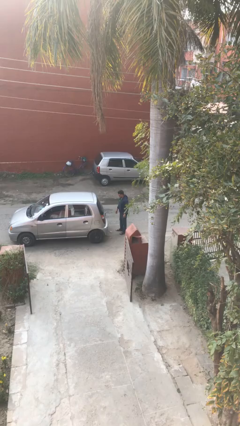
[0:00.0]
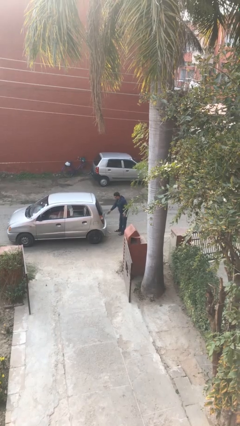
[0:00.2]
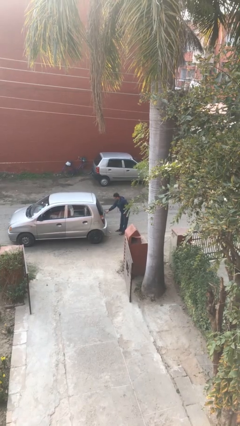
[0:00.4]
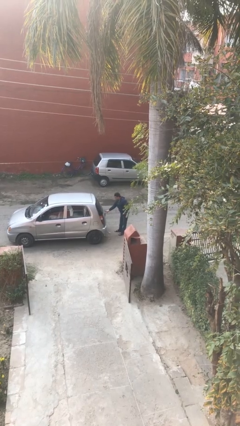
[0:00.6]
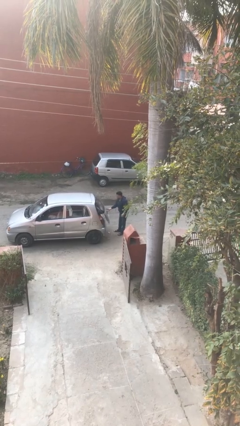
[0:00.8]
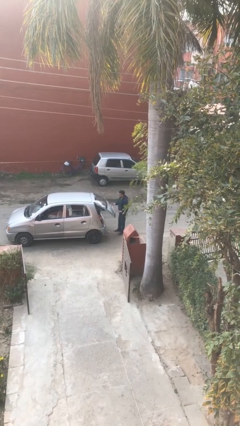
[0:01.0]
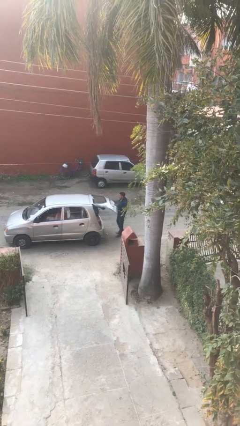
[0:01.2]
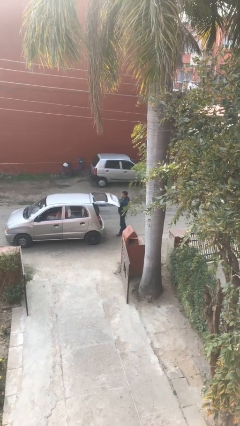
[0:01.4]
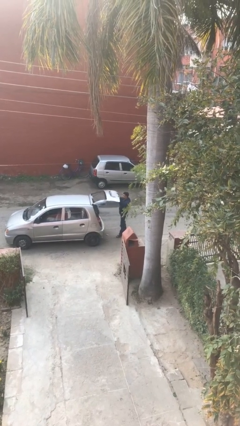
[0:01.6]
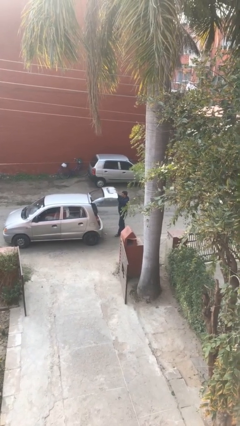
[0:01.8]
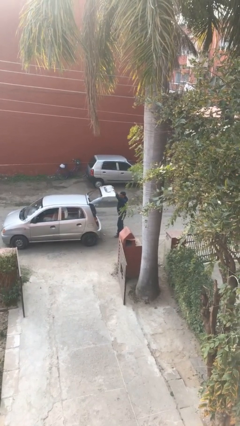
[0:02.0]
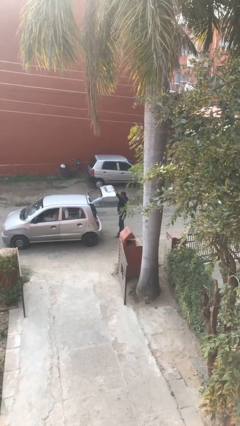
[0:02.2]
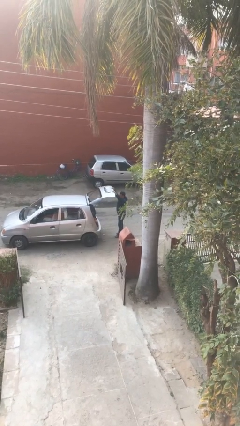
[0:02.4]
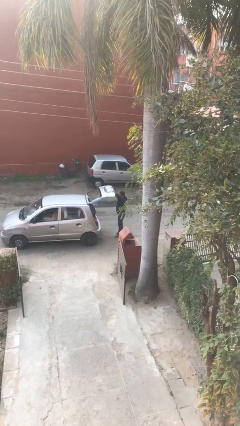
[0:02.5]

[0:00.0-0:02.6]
person opens car trunk

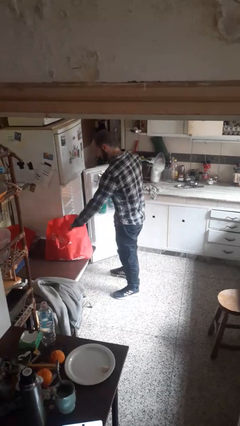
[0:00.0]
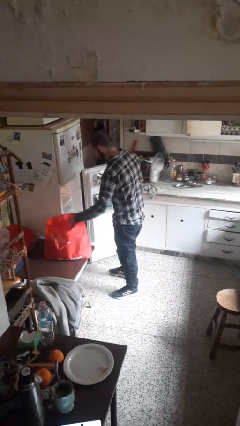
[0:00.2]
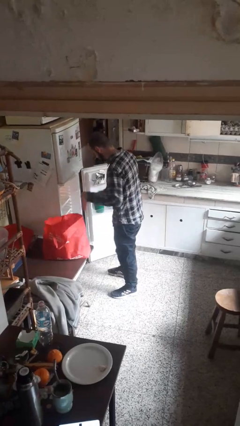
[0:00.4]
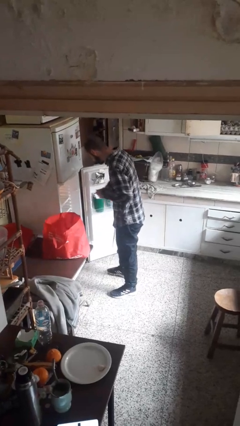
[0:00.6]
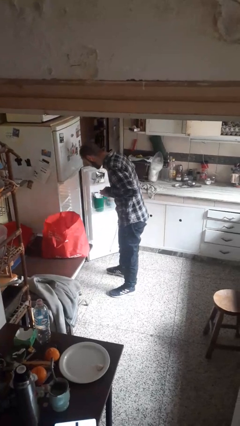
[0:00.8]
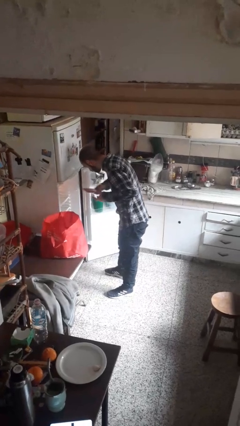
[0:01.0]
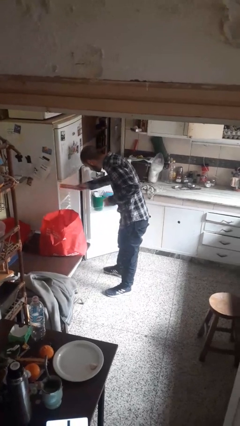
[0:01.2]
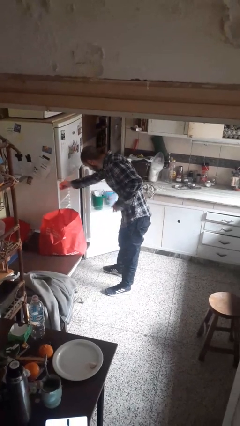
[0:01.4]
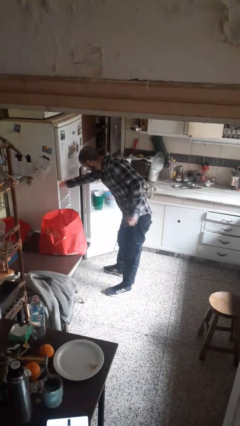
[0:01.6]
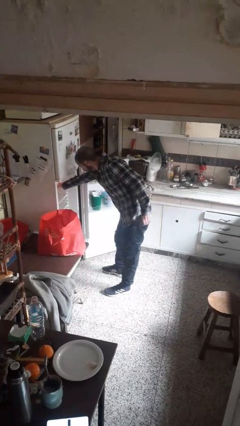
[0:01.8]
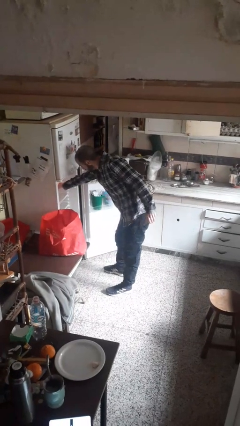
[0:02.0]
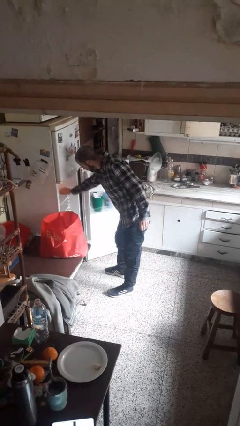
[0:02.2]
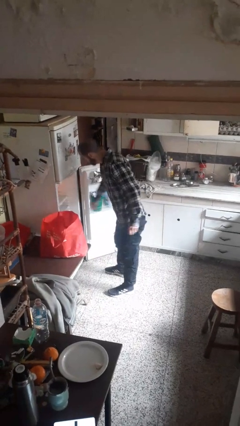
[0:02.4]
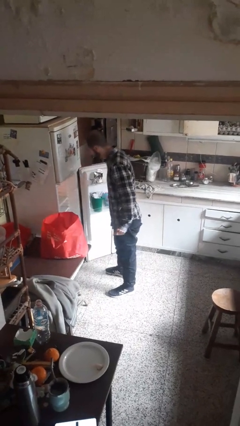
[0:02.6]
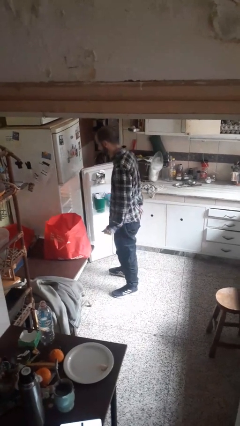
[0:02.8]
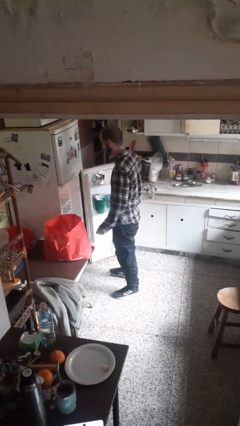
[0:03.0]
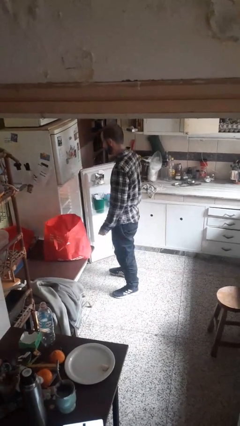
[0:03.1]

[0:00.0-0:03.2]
person loads groceries into refrigerator

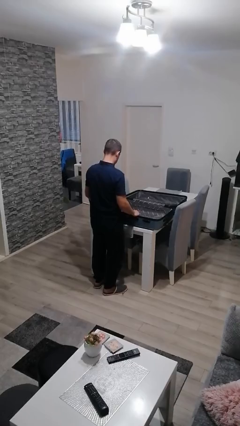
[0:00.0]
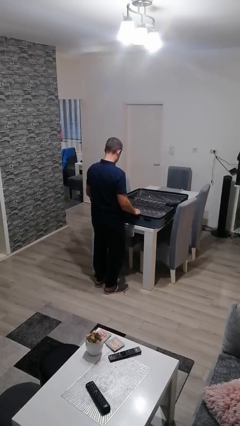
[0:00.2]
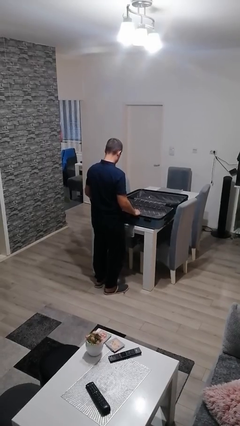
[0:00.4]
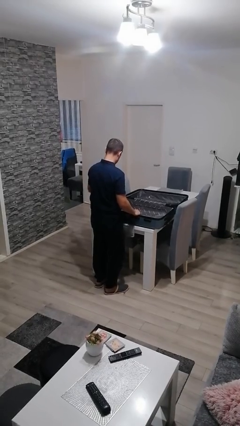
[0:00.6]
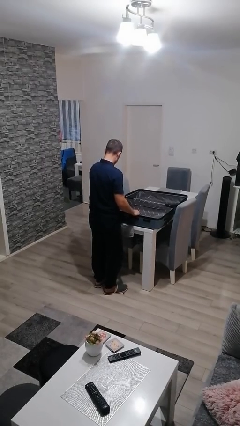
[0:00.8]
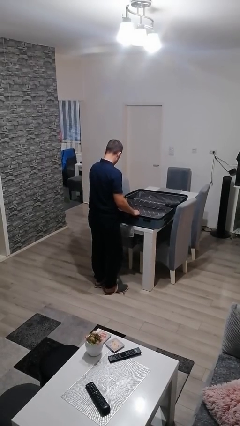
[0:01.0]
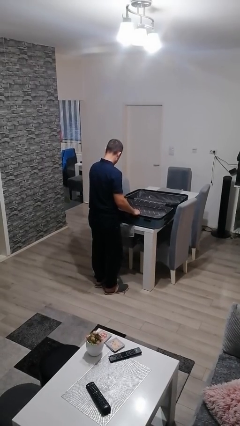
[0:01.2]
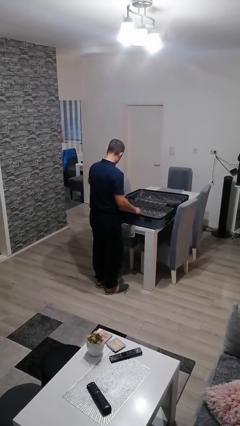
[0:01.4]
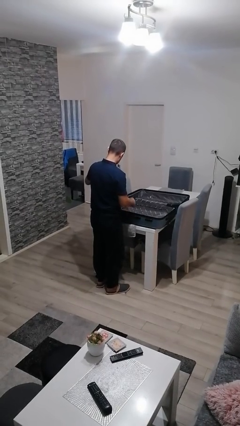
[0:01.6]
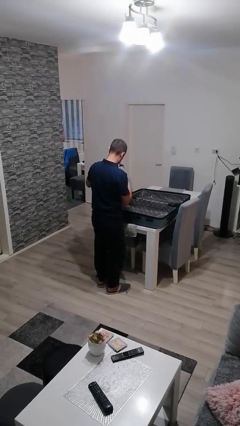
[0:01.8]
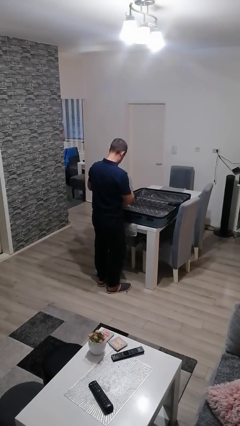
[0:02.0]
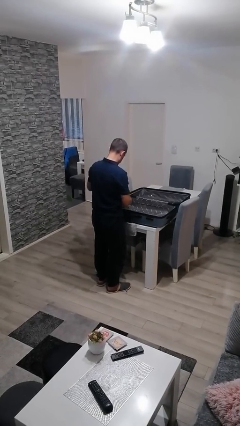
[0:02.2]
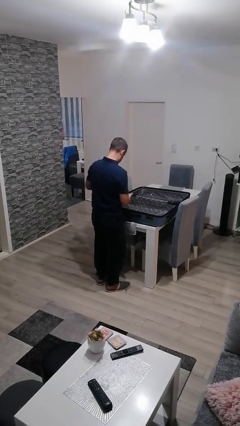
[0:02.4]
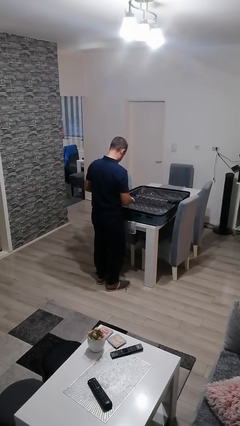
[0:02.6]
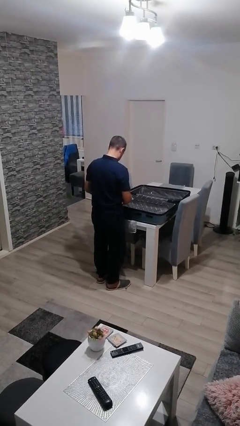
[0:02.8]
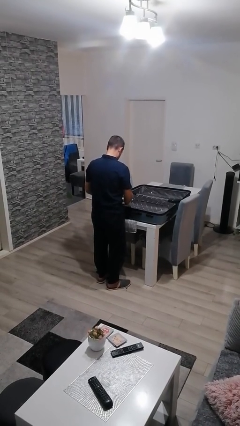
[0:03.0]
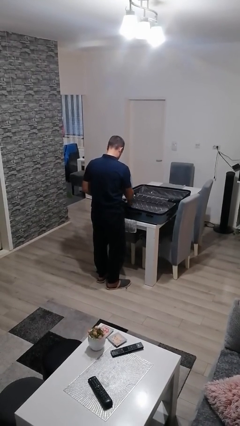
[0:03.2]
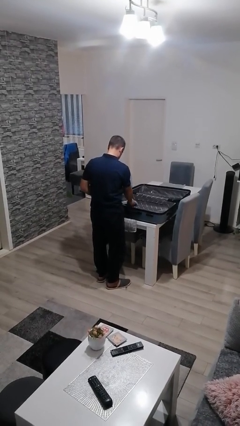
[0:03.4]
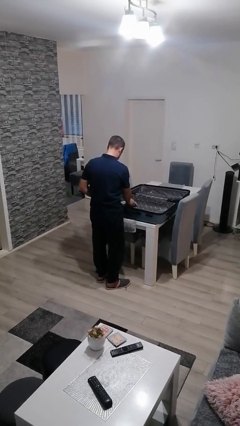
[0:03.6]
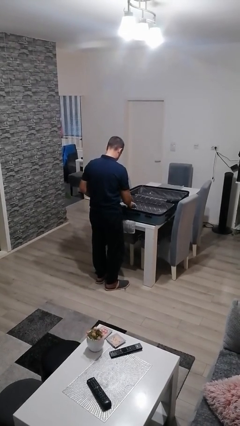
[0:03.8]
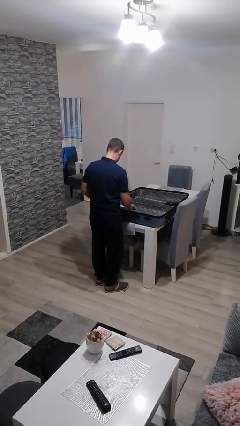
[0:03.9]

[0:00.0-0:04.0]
person loads clothes into suitcase

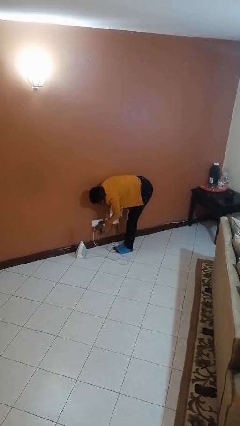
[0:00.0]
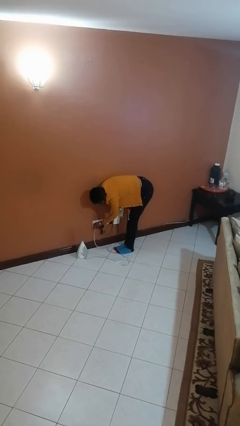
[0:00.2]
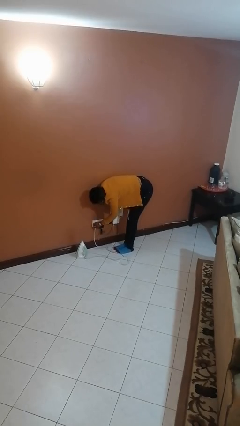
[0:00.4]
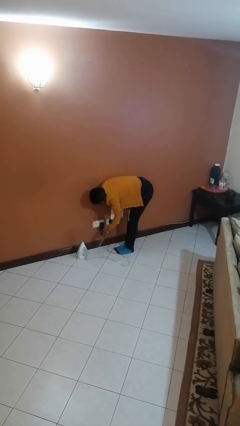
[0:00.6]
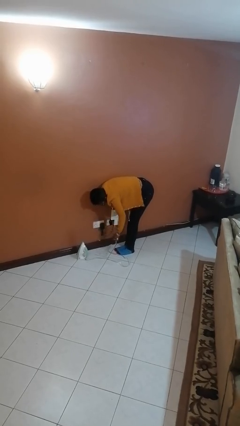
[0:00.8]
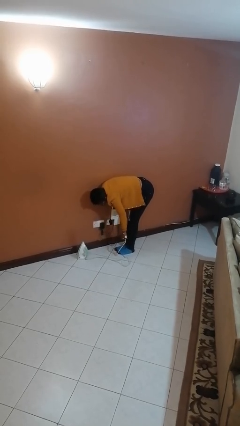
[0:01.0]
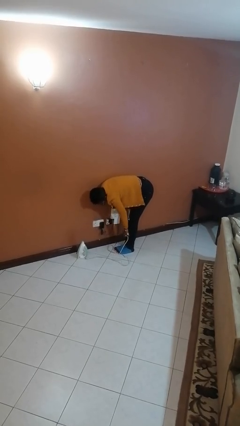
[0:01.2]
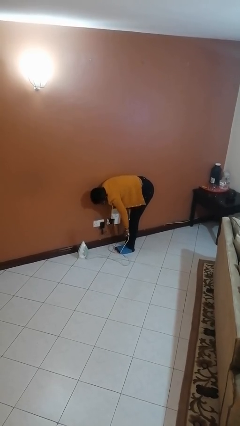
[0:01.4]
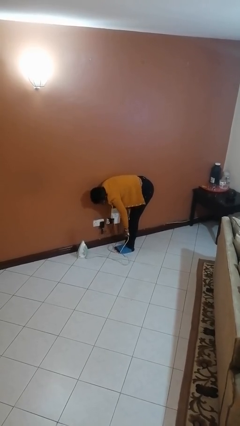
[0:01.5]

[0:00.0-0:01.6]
person unplugs from electrical socket

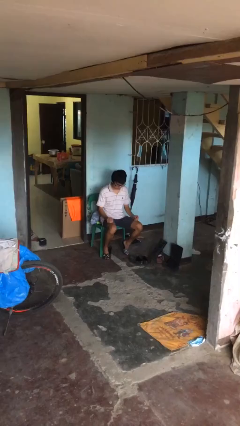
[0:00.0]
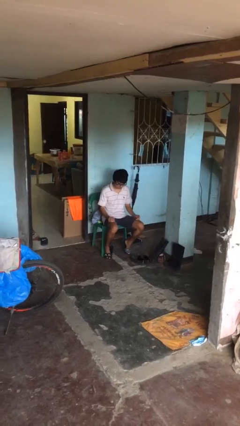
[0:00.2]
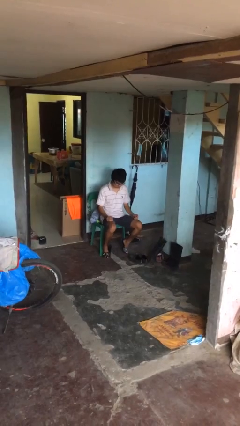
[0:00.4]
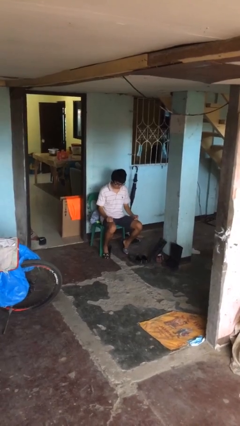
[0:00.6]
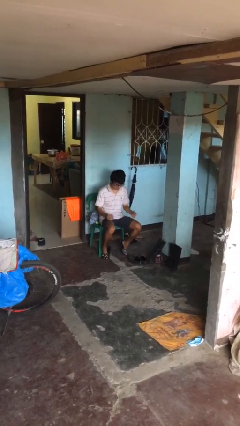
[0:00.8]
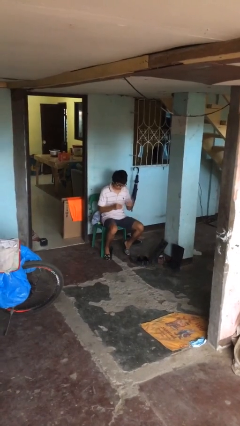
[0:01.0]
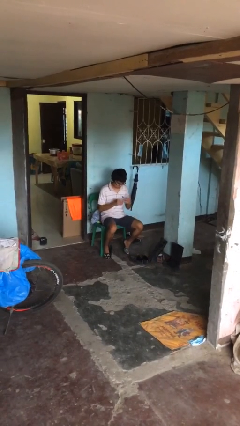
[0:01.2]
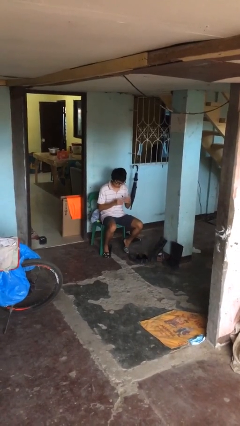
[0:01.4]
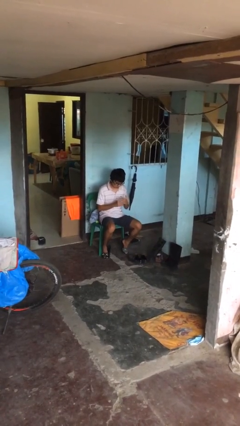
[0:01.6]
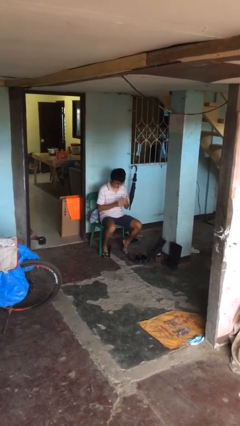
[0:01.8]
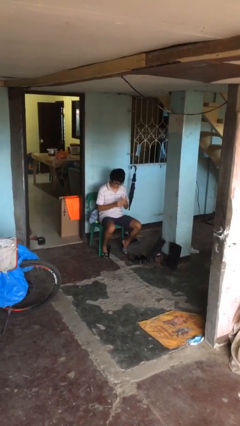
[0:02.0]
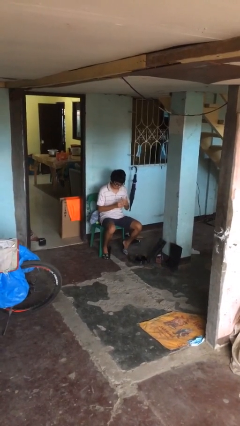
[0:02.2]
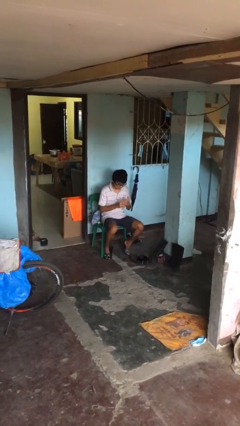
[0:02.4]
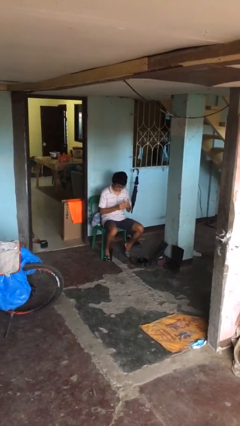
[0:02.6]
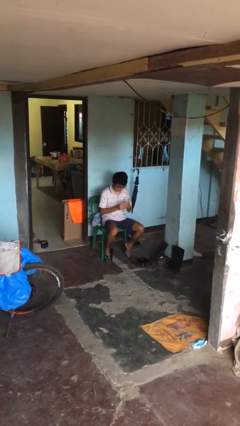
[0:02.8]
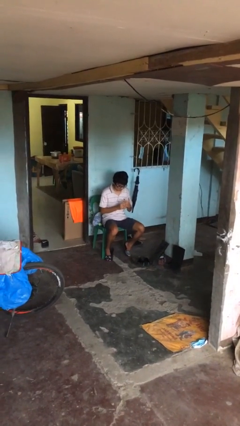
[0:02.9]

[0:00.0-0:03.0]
person puts on ring

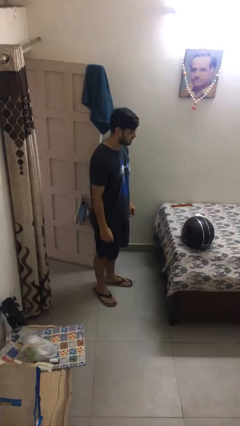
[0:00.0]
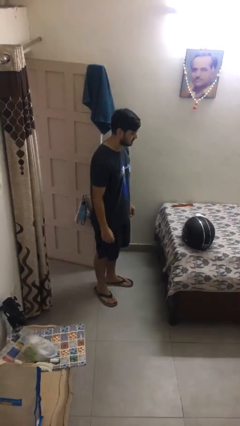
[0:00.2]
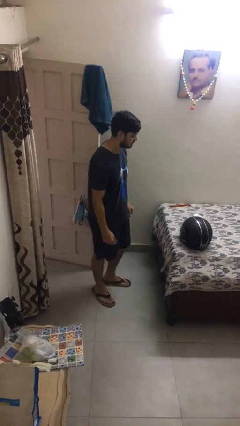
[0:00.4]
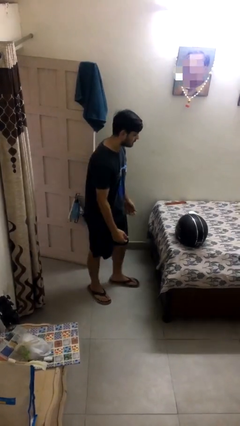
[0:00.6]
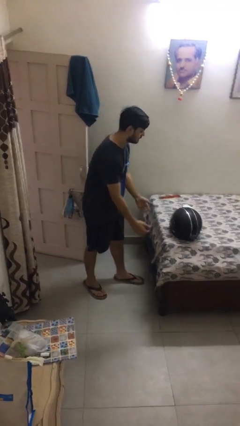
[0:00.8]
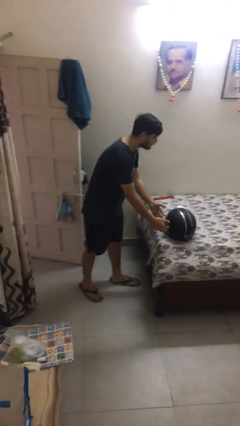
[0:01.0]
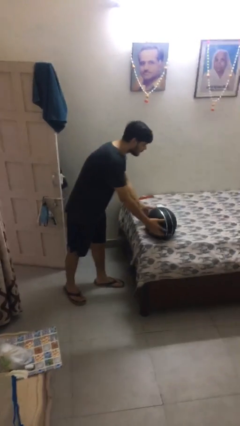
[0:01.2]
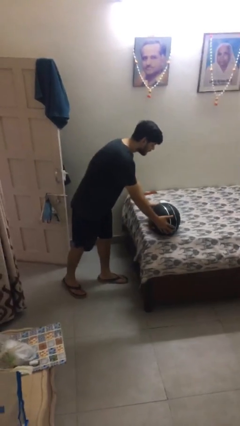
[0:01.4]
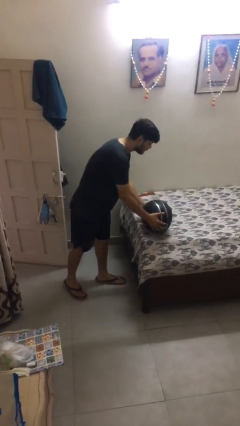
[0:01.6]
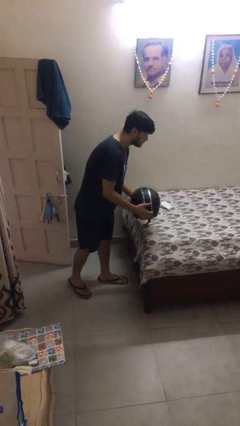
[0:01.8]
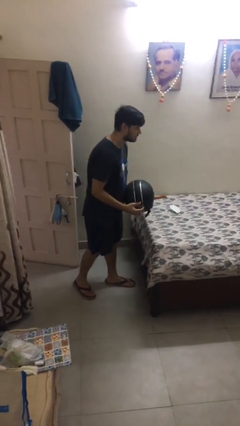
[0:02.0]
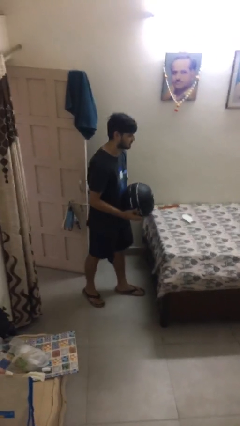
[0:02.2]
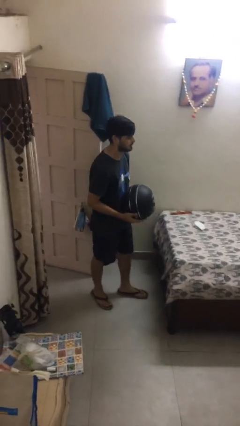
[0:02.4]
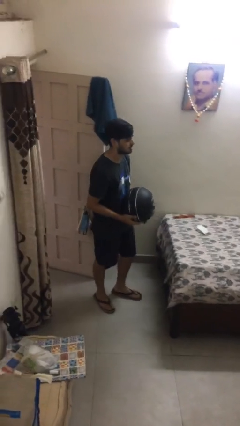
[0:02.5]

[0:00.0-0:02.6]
person picks up object from bed

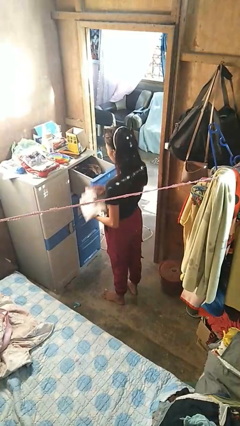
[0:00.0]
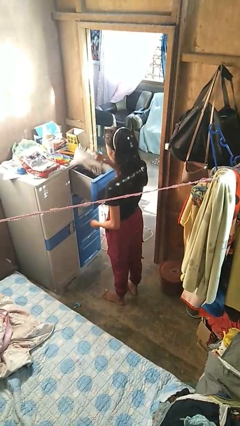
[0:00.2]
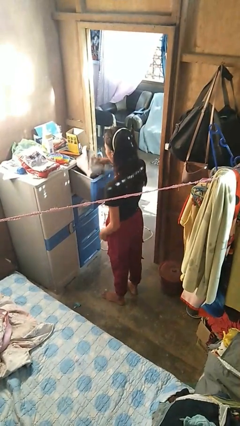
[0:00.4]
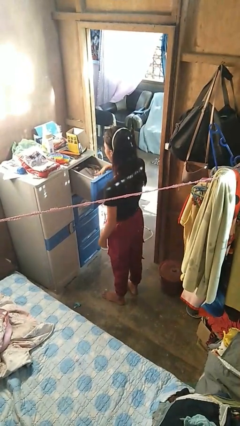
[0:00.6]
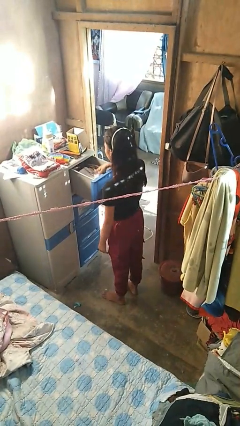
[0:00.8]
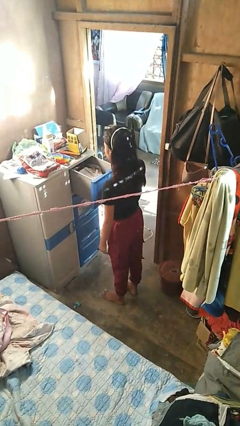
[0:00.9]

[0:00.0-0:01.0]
person puts clothes into dresser
